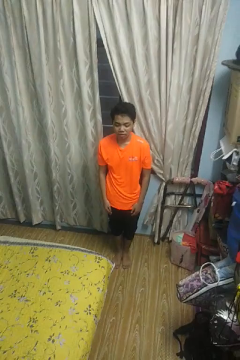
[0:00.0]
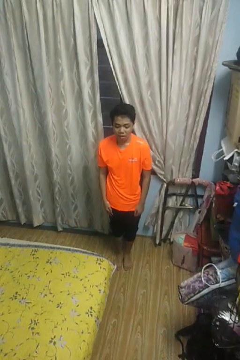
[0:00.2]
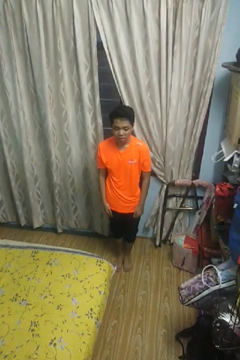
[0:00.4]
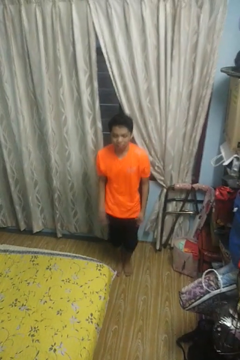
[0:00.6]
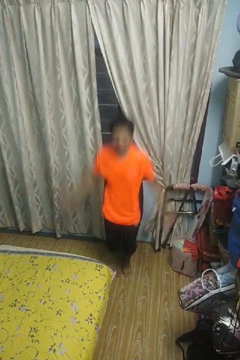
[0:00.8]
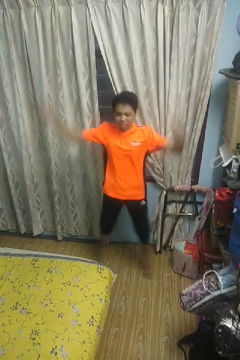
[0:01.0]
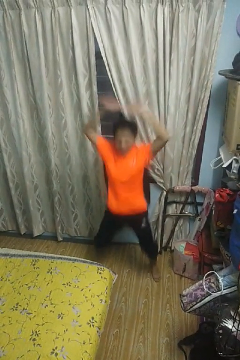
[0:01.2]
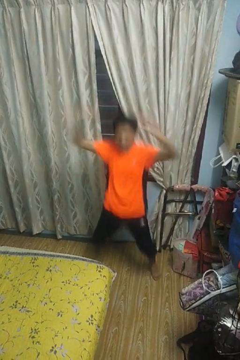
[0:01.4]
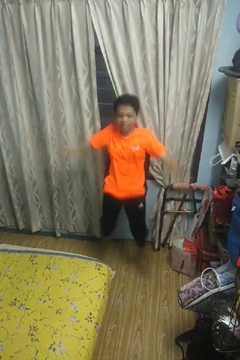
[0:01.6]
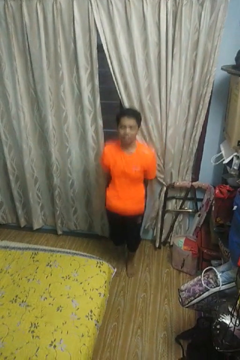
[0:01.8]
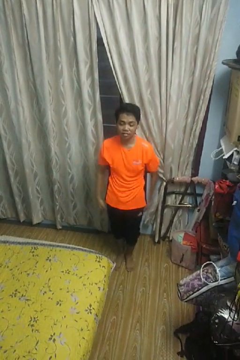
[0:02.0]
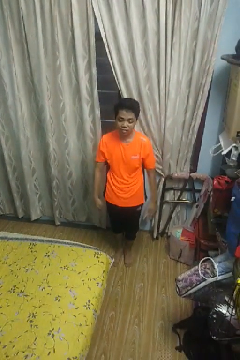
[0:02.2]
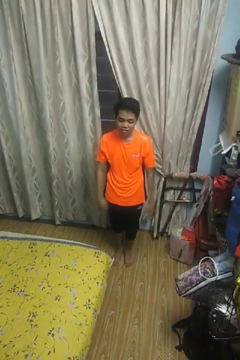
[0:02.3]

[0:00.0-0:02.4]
person exercises with jumping jacks

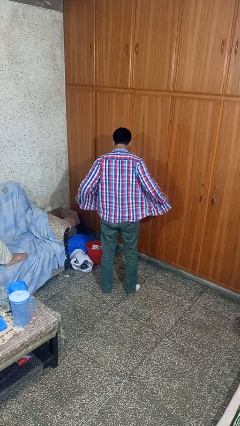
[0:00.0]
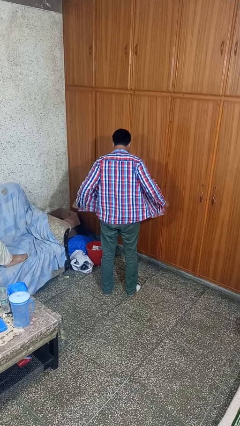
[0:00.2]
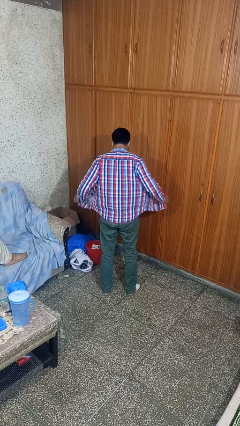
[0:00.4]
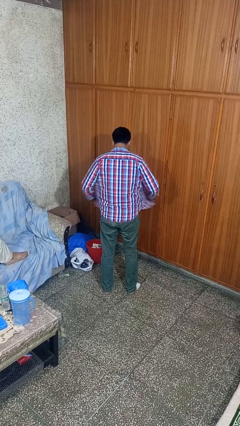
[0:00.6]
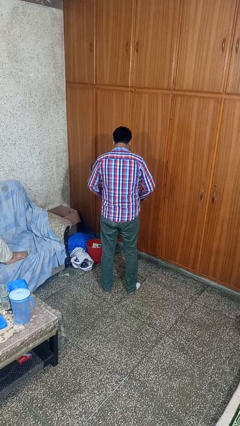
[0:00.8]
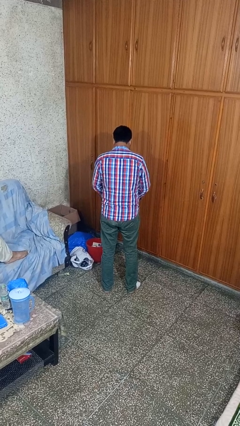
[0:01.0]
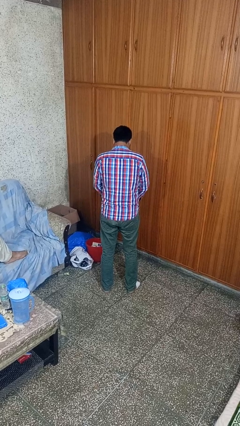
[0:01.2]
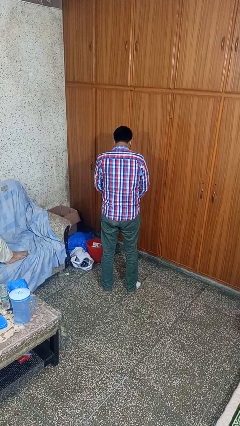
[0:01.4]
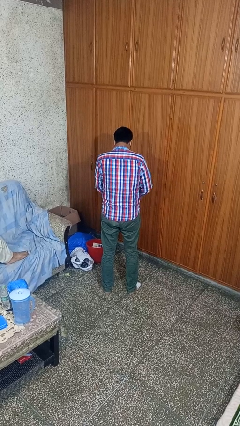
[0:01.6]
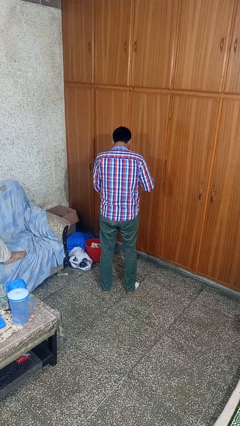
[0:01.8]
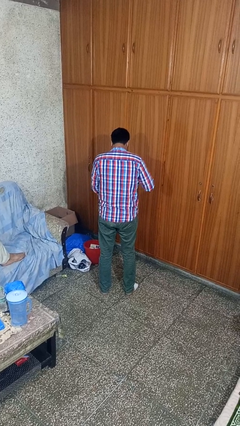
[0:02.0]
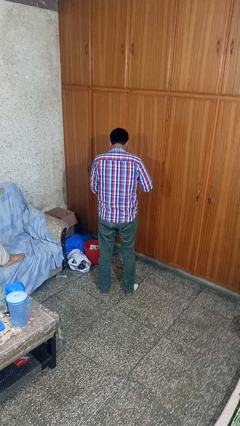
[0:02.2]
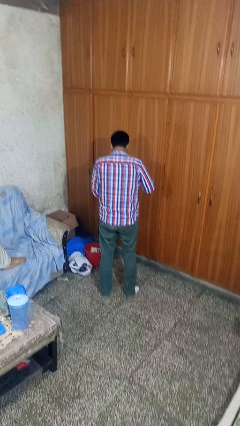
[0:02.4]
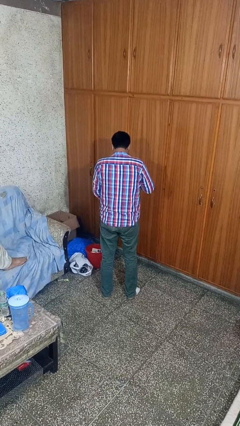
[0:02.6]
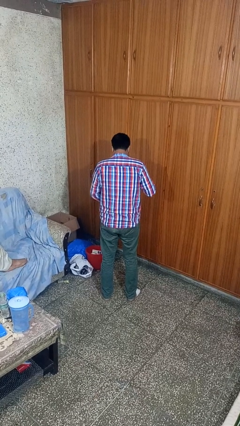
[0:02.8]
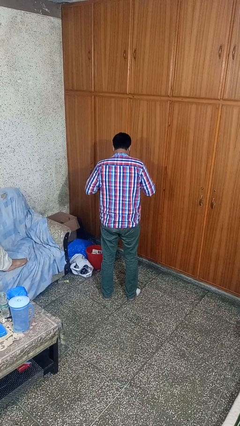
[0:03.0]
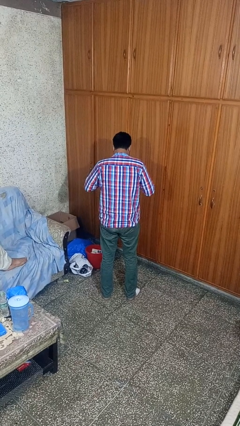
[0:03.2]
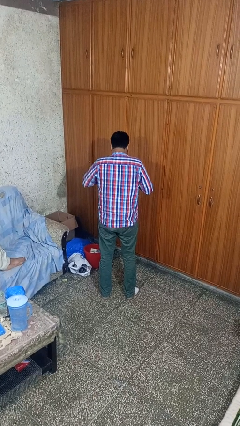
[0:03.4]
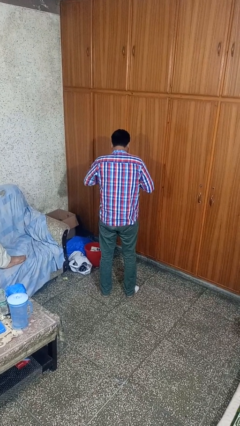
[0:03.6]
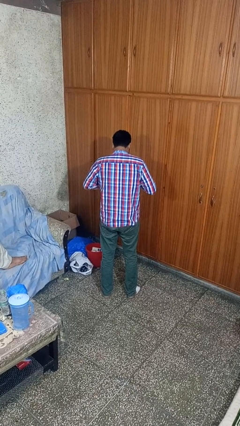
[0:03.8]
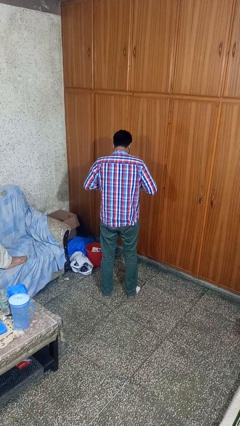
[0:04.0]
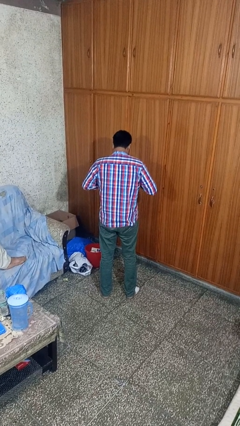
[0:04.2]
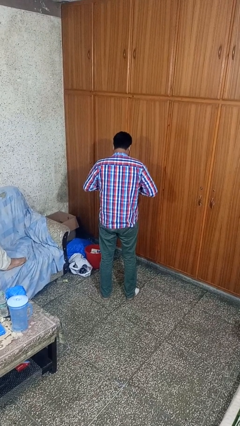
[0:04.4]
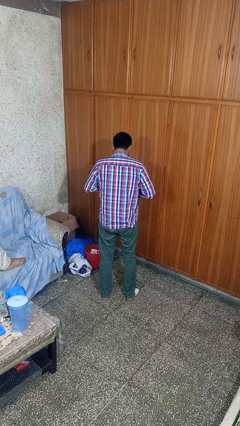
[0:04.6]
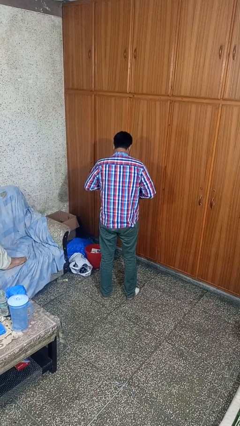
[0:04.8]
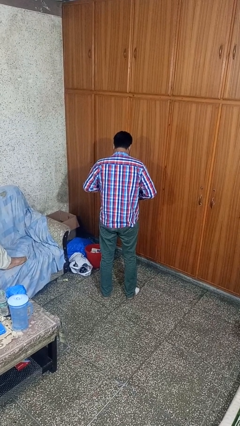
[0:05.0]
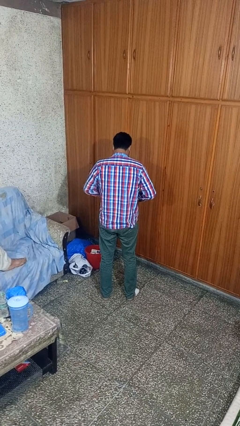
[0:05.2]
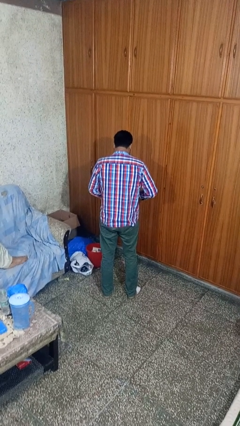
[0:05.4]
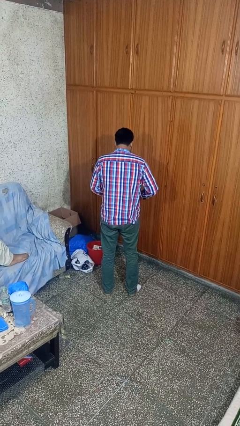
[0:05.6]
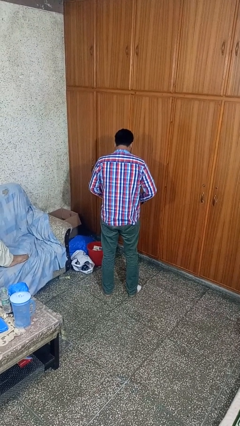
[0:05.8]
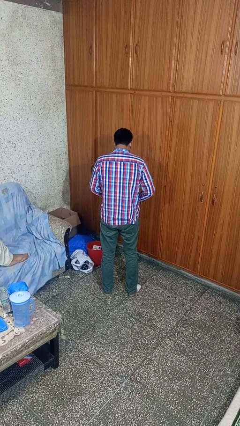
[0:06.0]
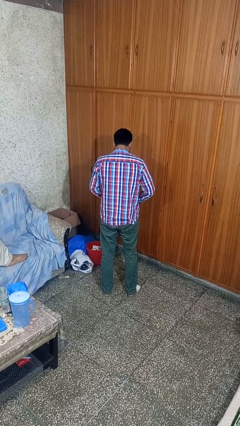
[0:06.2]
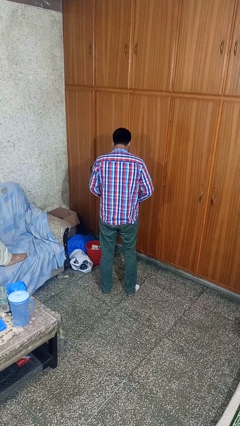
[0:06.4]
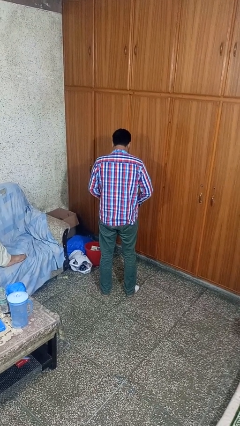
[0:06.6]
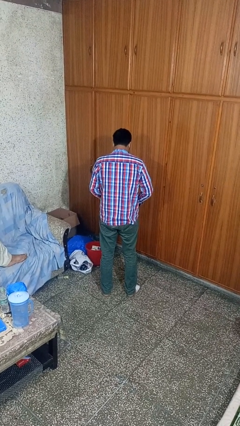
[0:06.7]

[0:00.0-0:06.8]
person buttons shirt

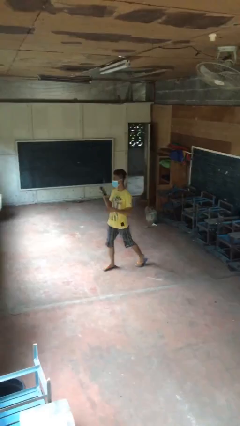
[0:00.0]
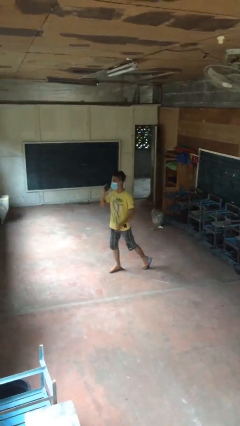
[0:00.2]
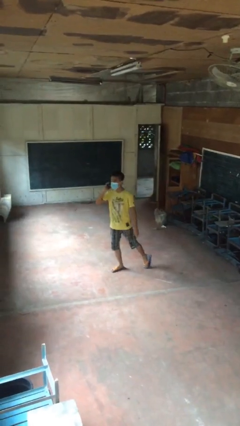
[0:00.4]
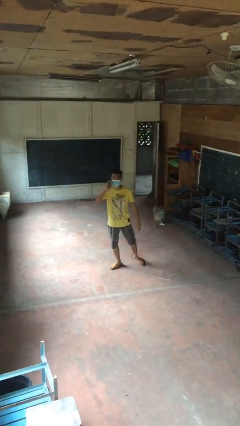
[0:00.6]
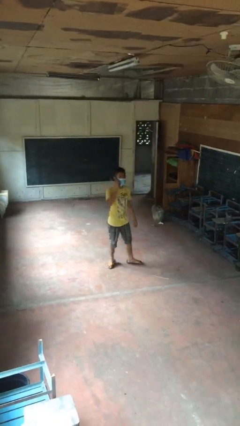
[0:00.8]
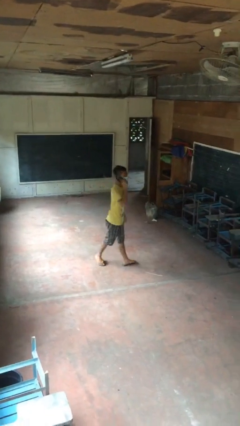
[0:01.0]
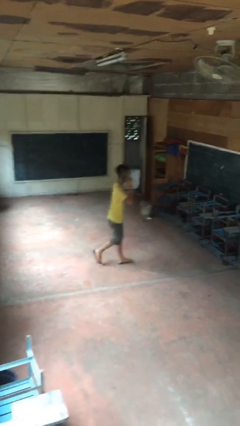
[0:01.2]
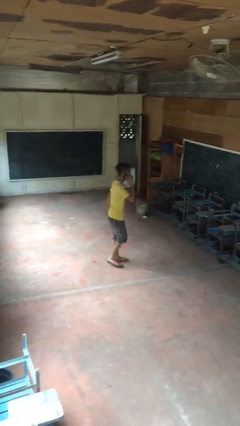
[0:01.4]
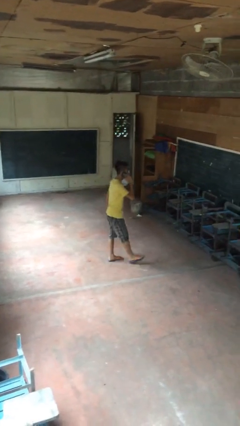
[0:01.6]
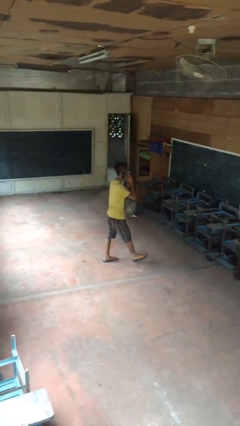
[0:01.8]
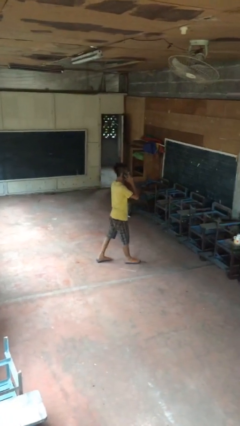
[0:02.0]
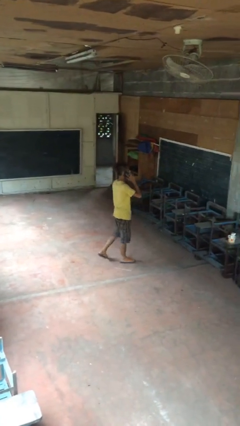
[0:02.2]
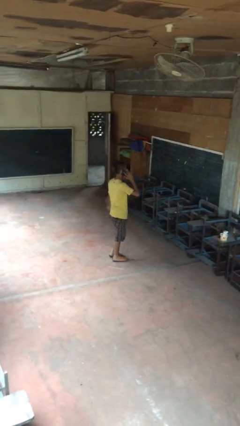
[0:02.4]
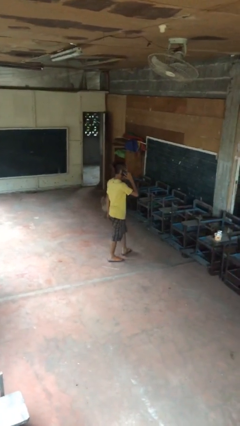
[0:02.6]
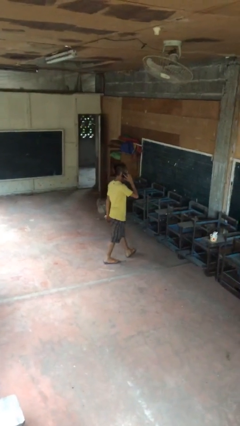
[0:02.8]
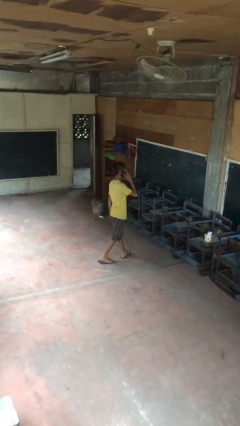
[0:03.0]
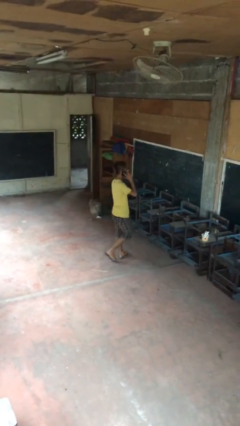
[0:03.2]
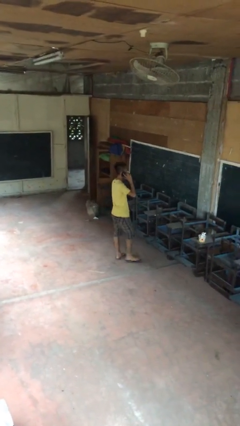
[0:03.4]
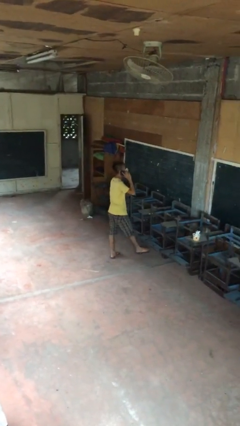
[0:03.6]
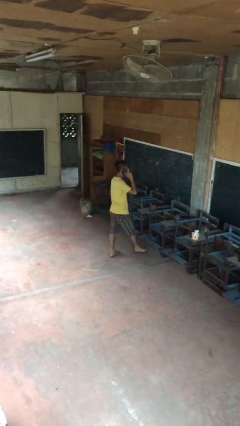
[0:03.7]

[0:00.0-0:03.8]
person talks on phone

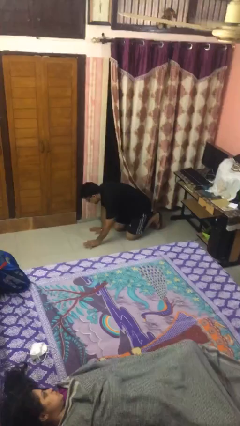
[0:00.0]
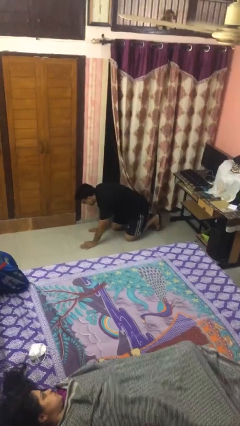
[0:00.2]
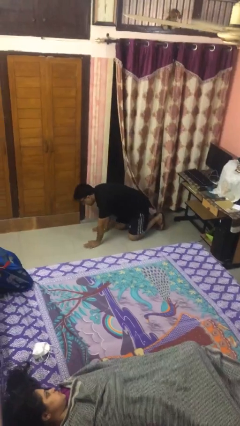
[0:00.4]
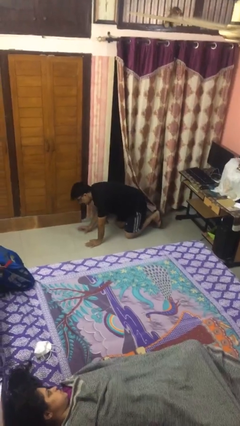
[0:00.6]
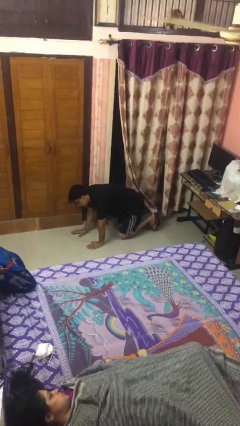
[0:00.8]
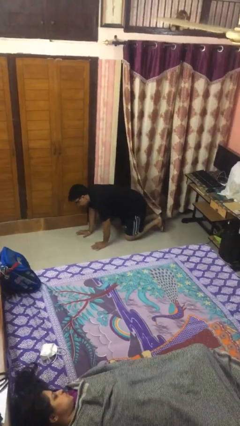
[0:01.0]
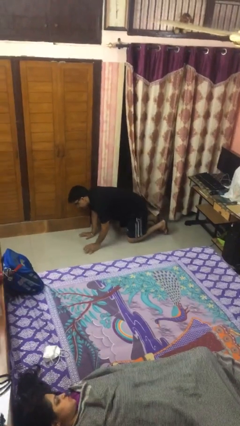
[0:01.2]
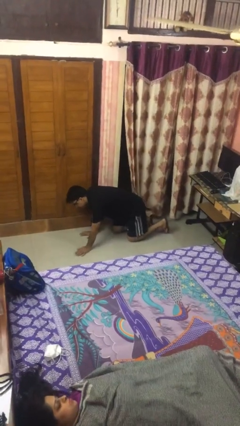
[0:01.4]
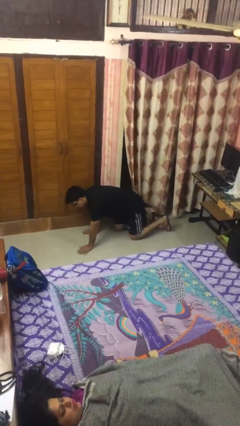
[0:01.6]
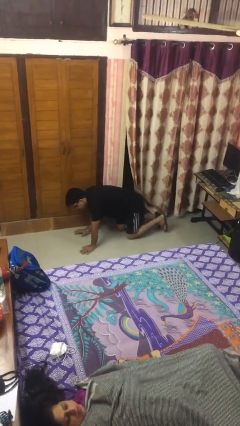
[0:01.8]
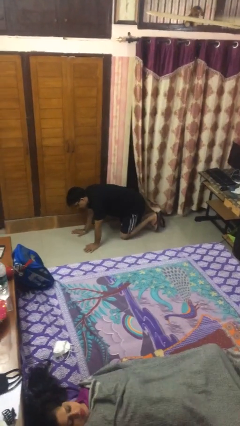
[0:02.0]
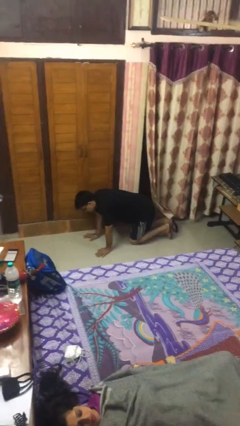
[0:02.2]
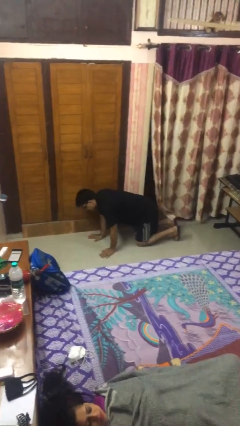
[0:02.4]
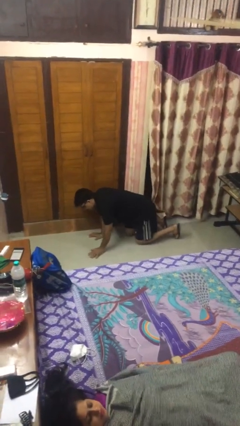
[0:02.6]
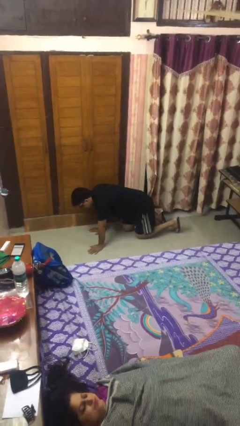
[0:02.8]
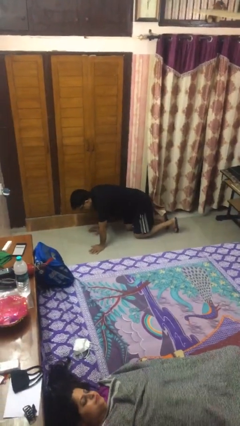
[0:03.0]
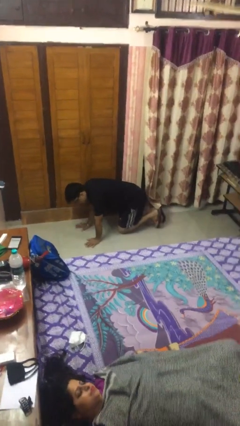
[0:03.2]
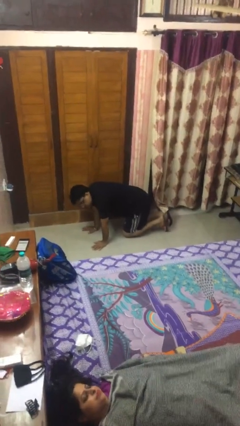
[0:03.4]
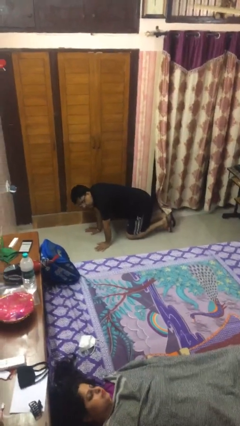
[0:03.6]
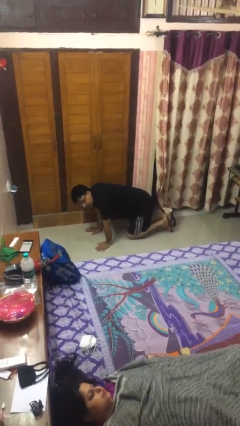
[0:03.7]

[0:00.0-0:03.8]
person crawls

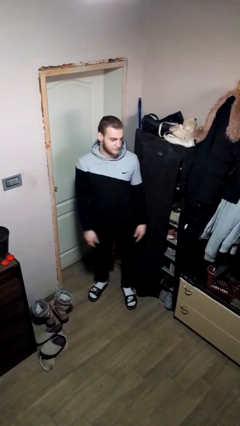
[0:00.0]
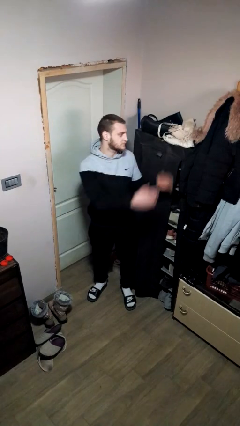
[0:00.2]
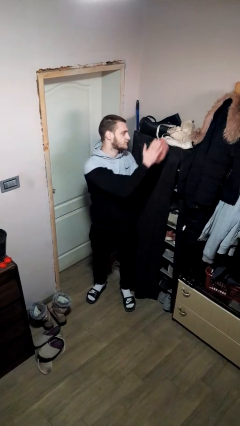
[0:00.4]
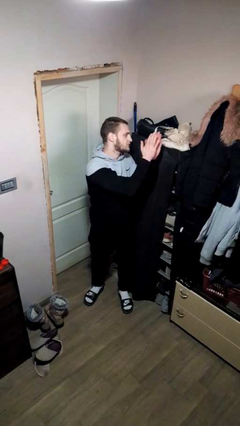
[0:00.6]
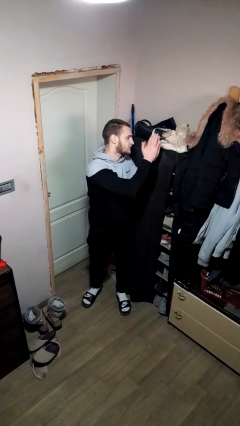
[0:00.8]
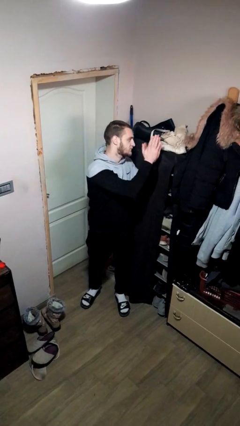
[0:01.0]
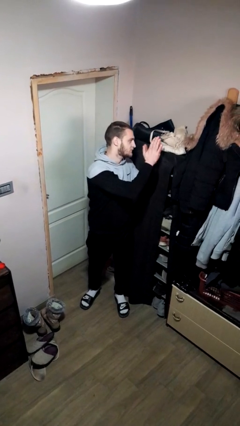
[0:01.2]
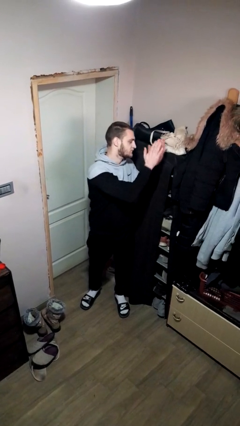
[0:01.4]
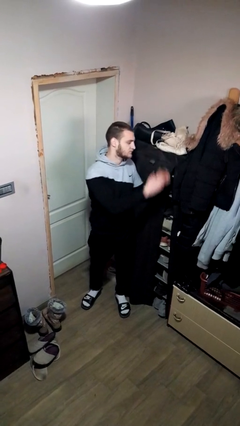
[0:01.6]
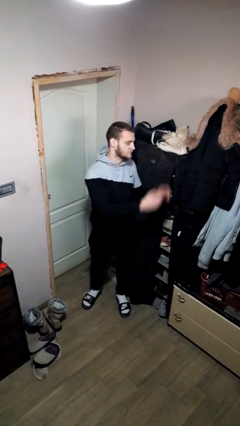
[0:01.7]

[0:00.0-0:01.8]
person claps hands
